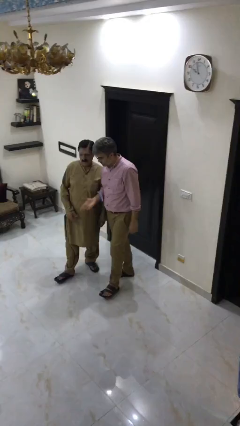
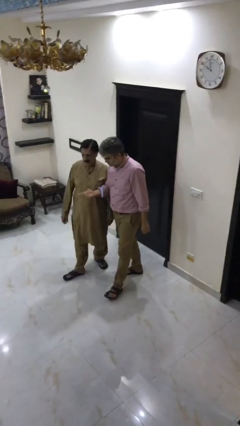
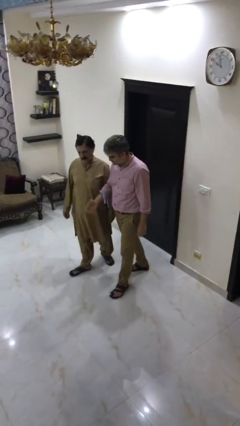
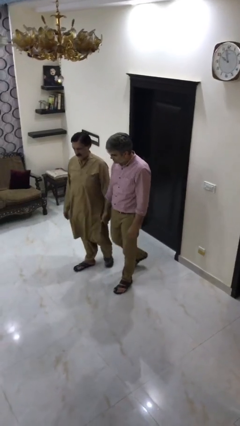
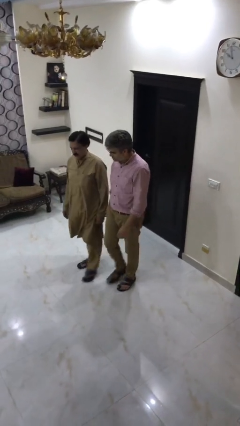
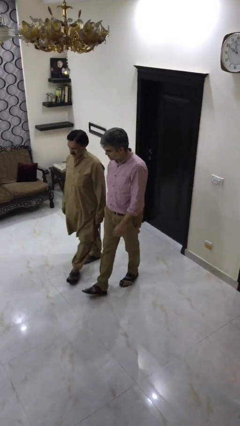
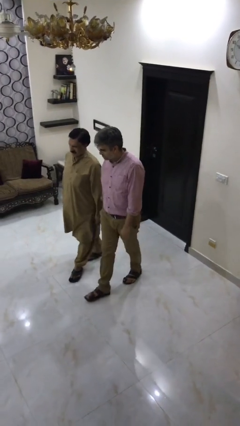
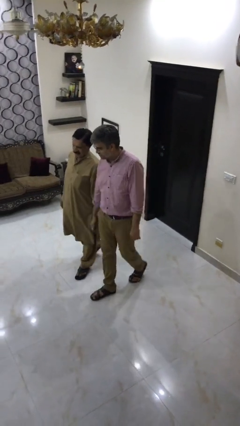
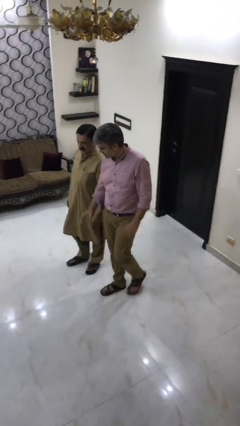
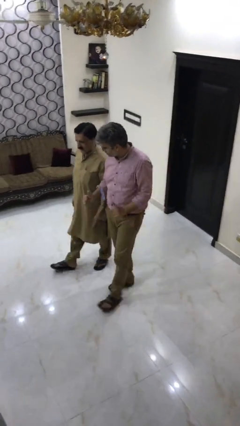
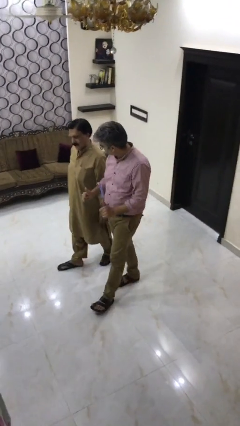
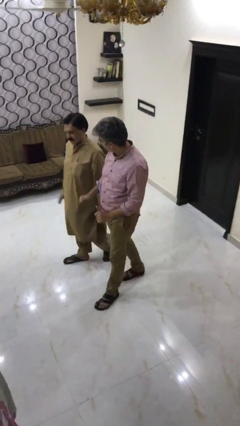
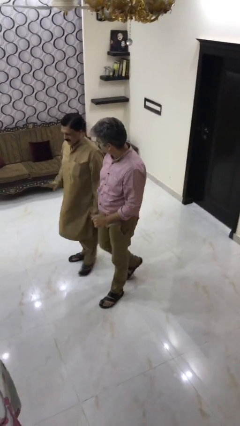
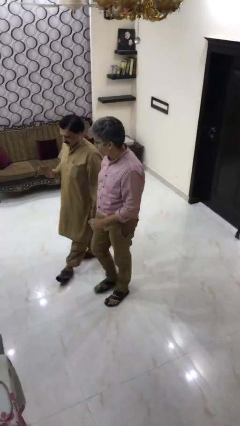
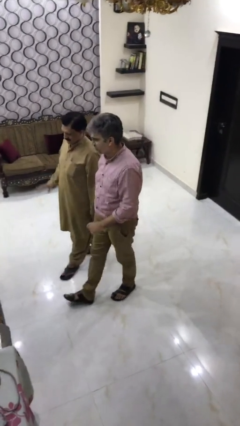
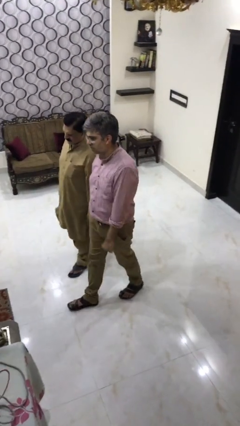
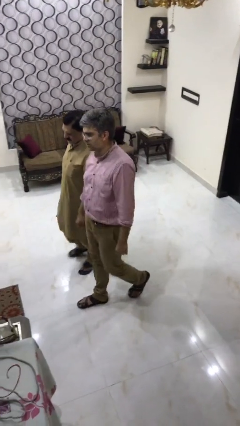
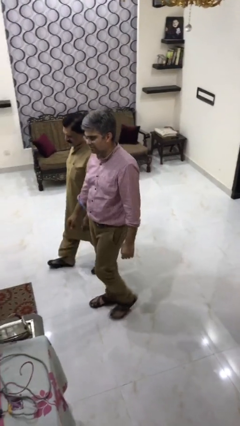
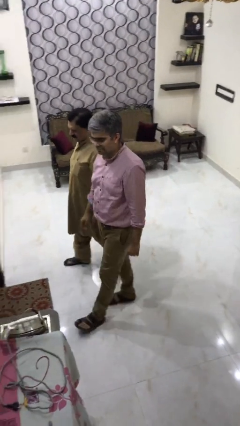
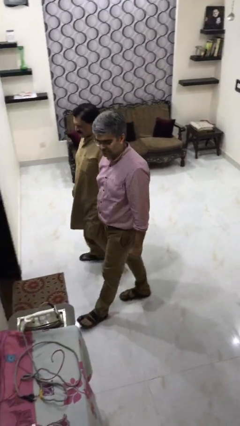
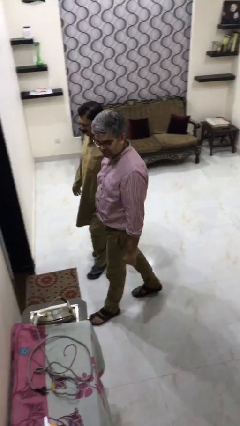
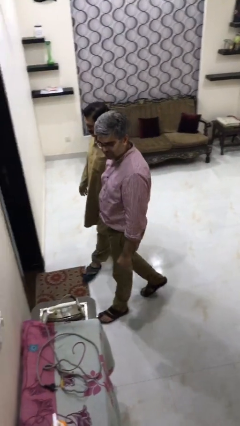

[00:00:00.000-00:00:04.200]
person talks to person

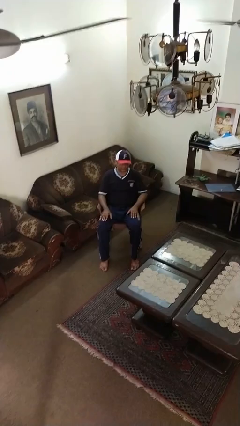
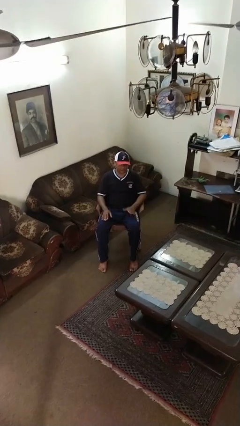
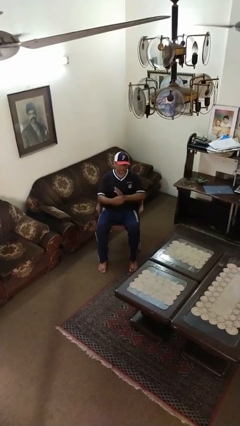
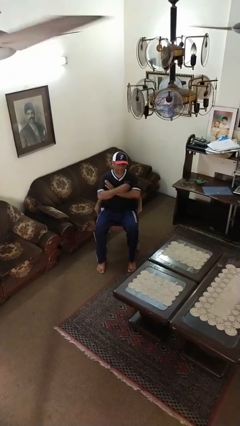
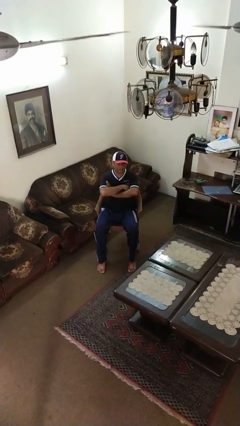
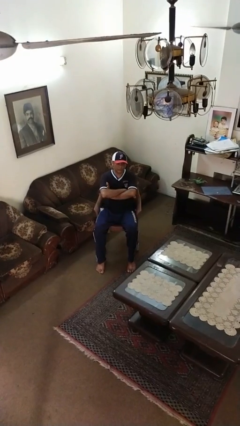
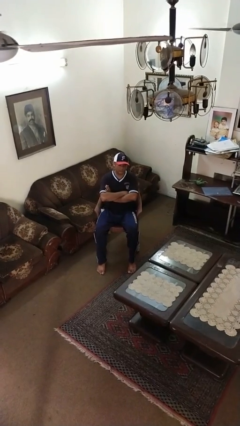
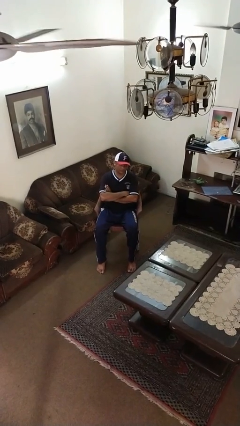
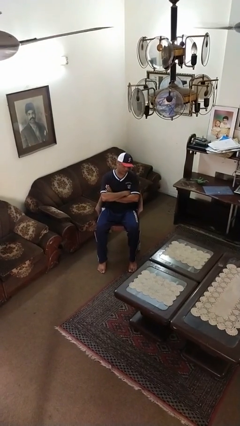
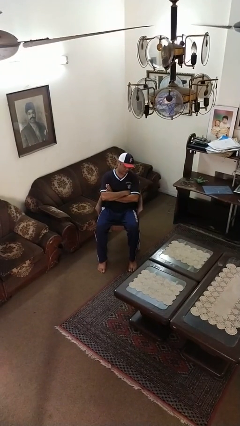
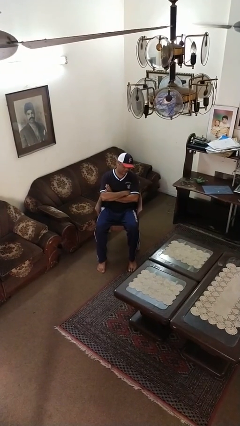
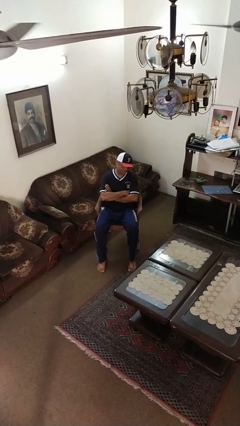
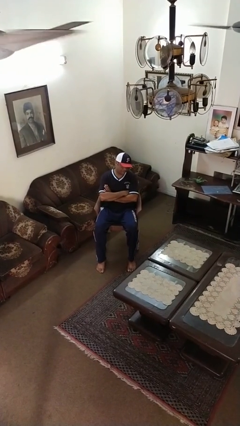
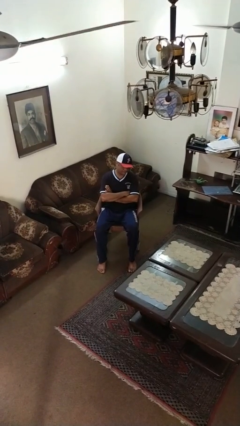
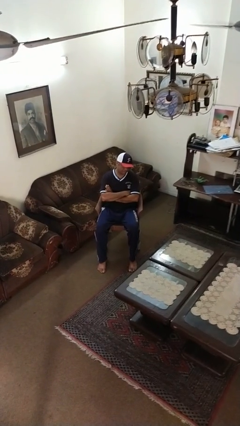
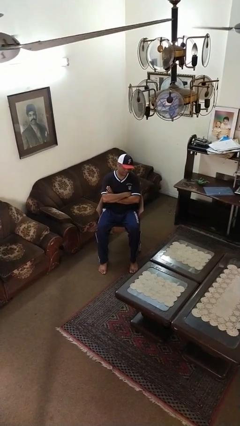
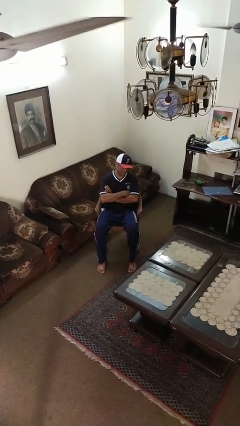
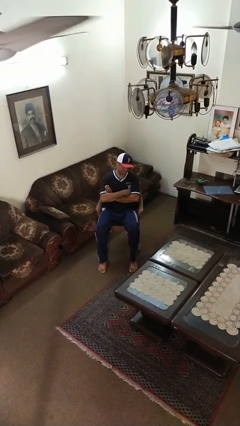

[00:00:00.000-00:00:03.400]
person crosses arms

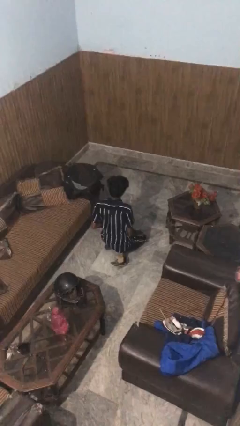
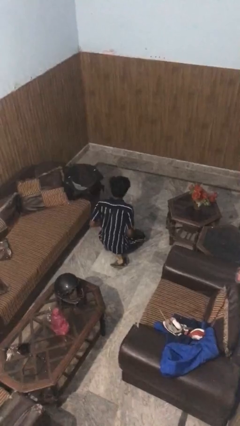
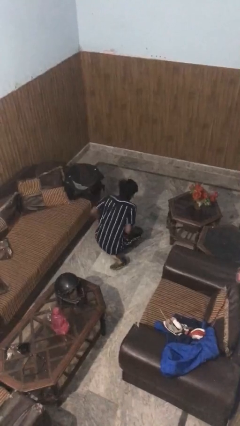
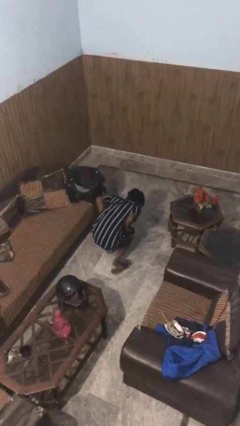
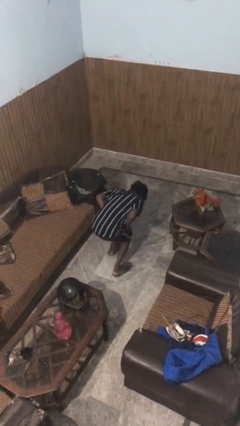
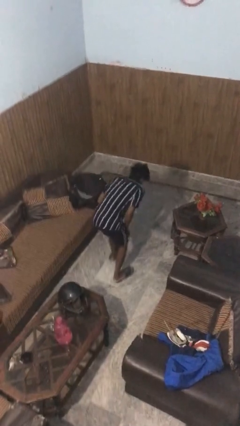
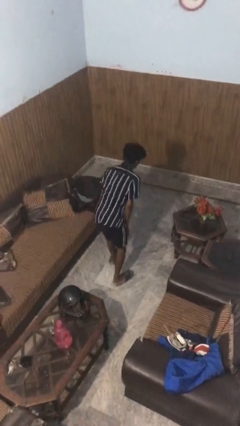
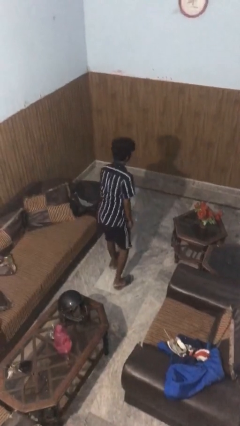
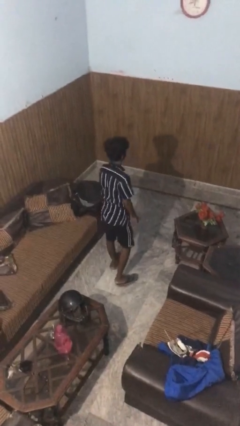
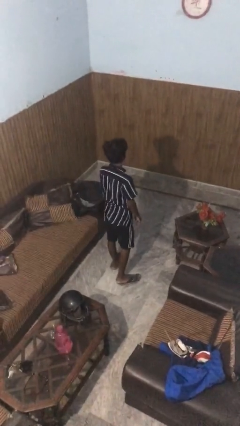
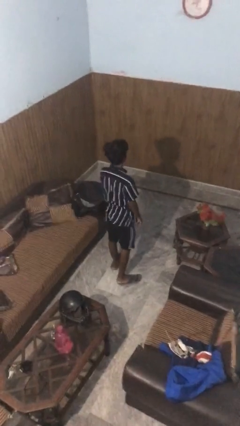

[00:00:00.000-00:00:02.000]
person stands up from floor

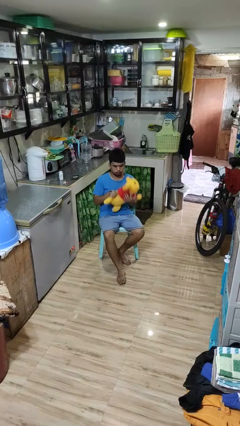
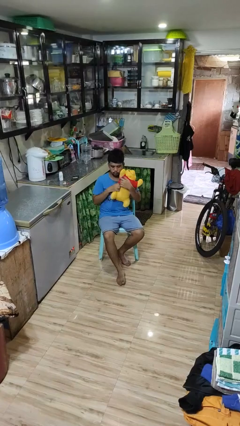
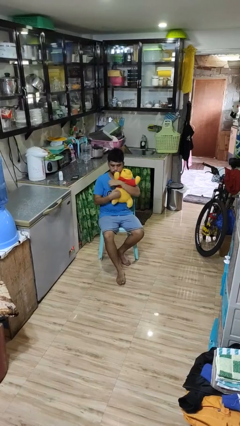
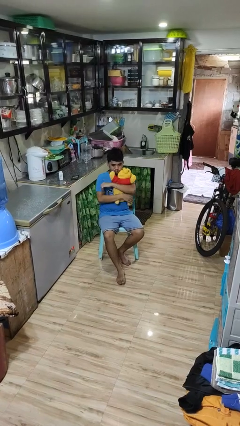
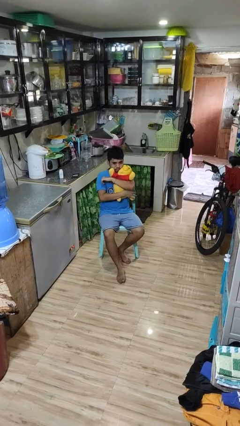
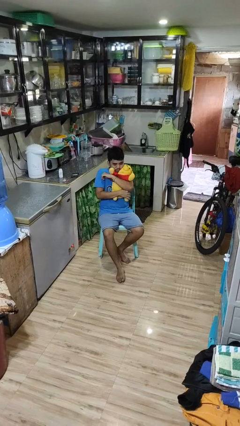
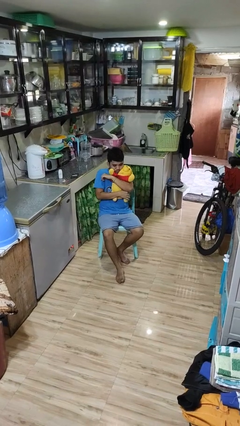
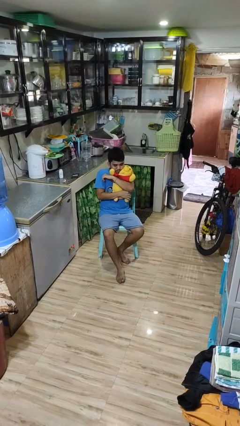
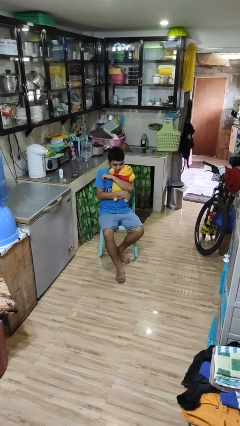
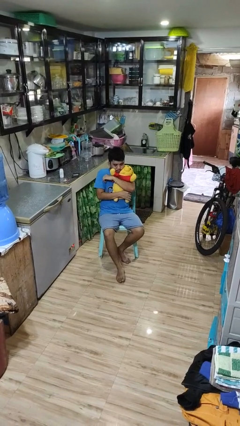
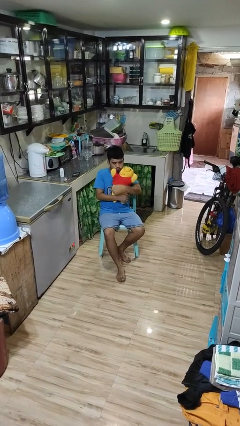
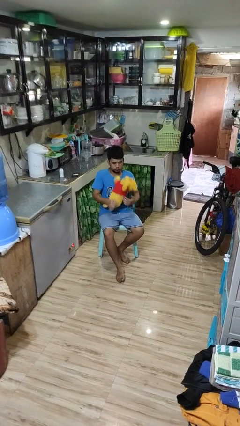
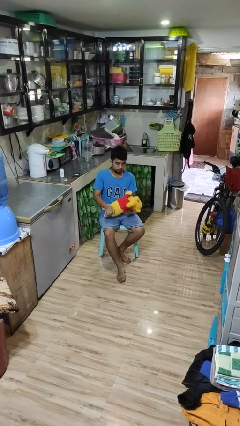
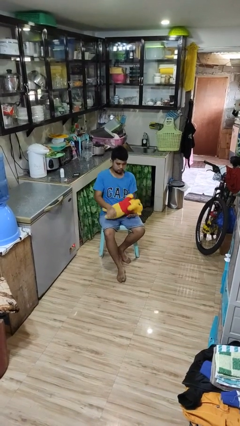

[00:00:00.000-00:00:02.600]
person hugs stuffed animal

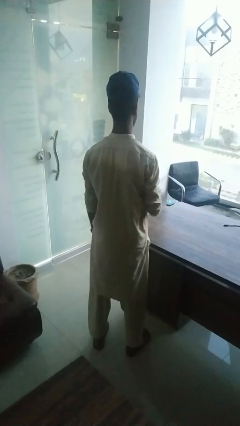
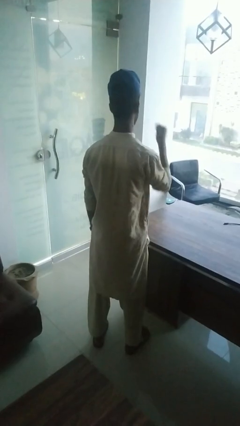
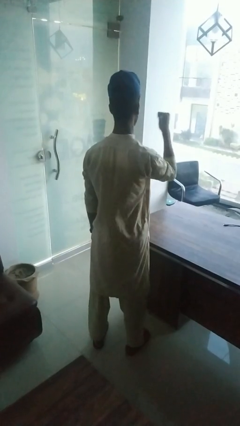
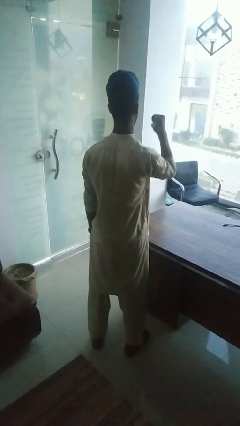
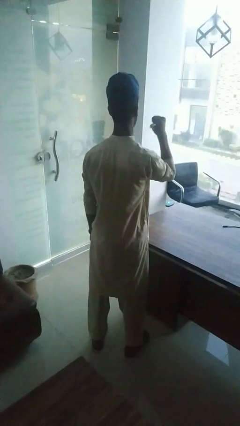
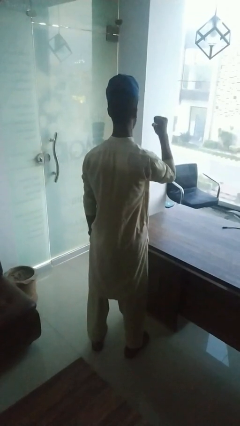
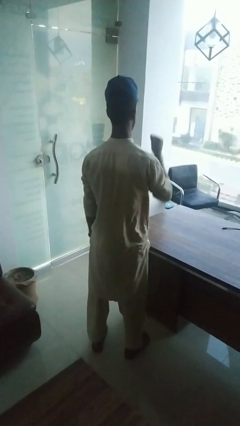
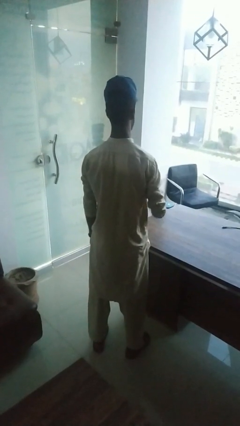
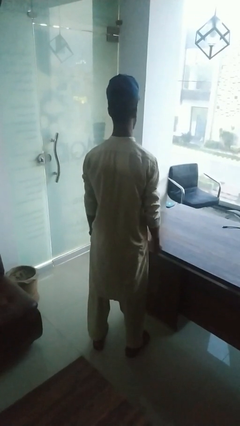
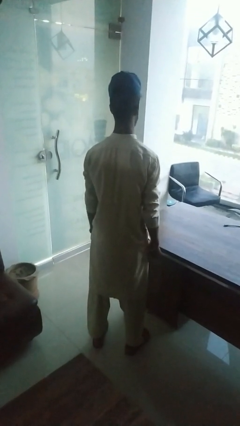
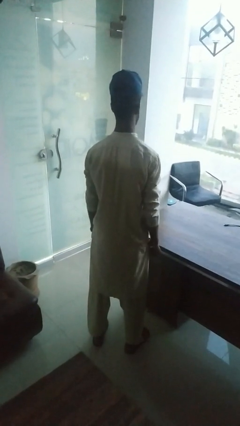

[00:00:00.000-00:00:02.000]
person gestures behind me

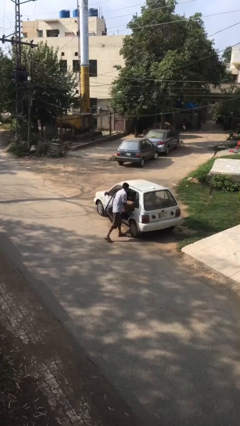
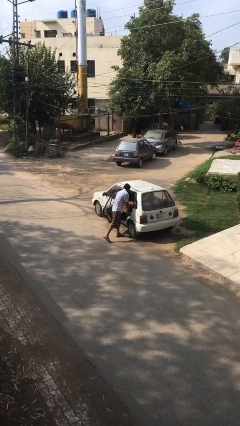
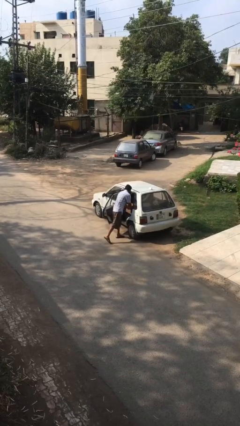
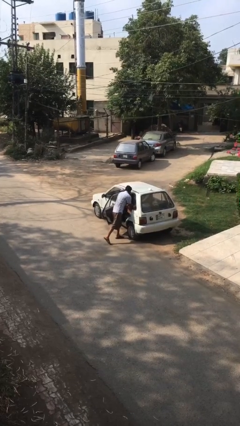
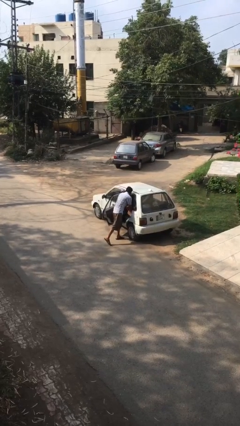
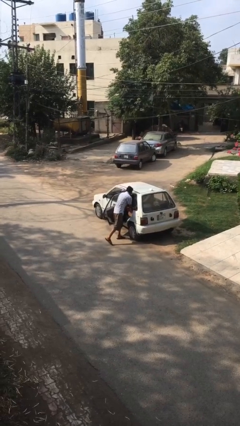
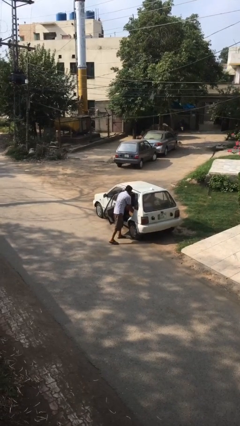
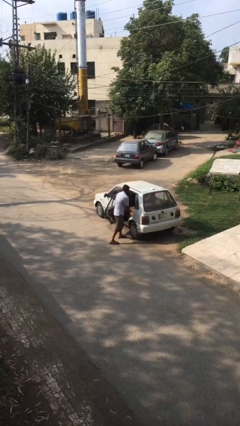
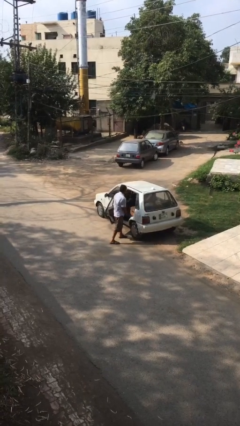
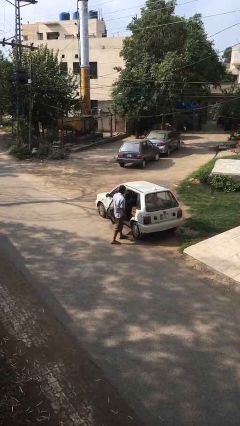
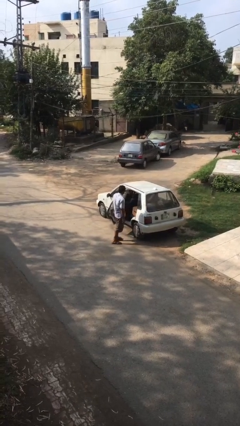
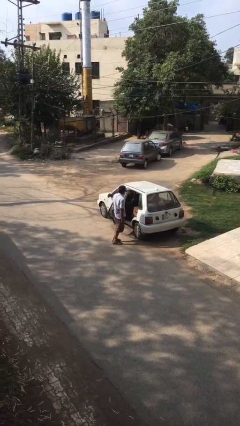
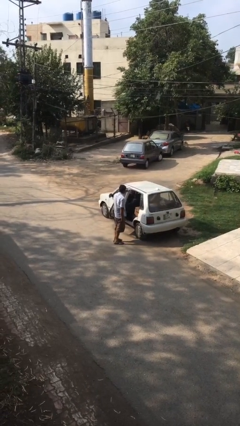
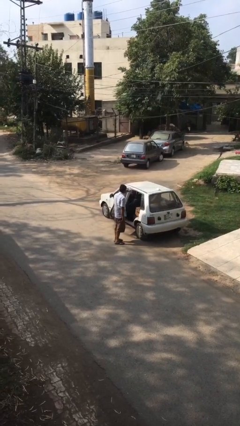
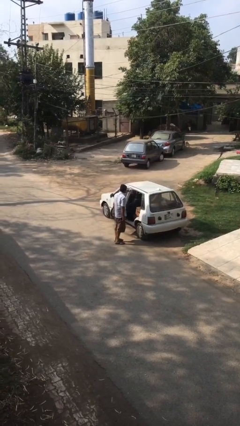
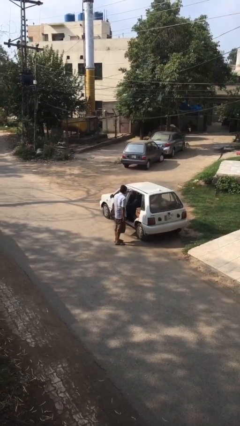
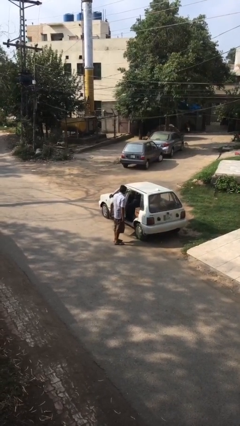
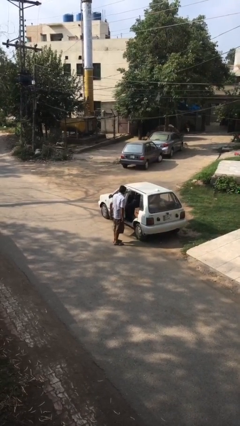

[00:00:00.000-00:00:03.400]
person loads car
